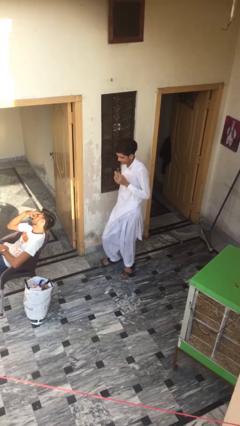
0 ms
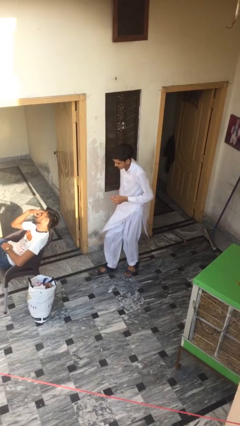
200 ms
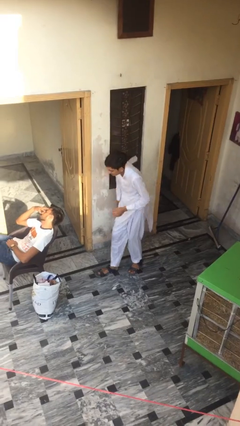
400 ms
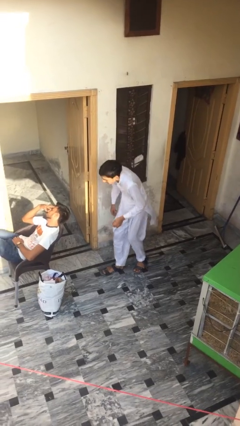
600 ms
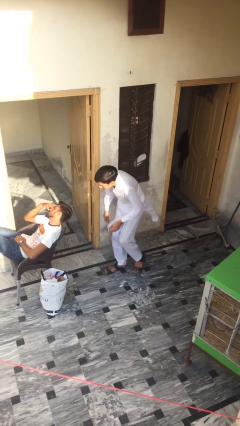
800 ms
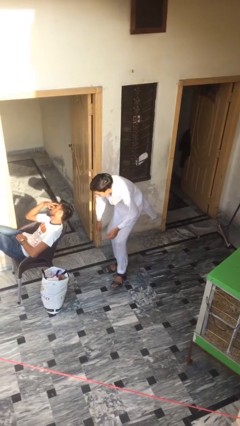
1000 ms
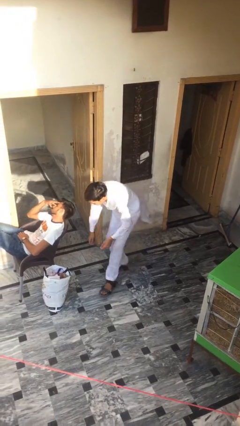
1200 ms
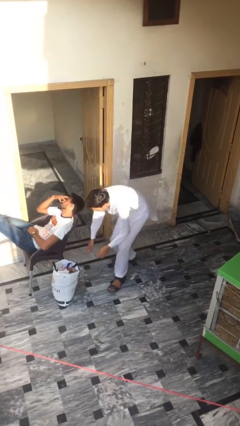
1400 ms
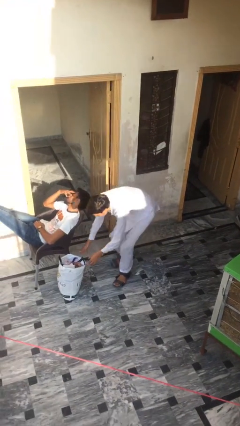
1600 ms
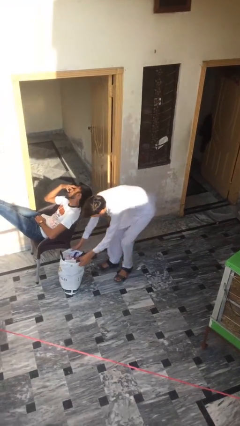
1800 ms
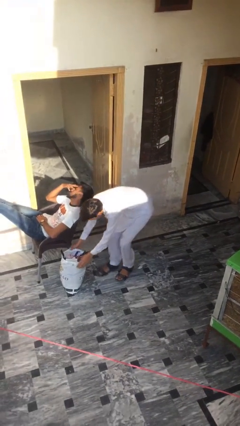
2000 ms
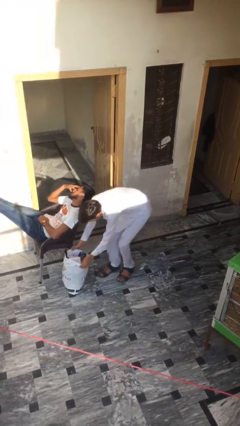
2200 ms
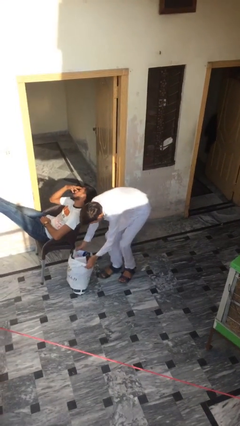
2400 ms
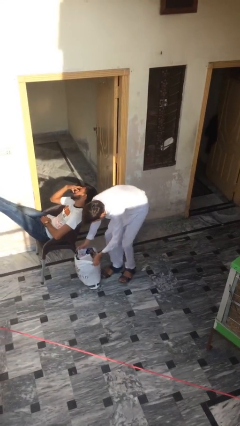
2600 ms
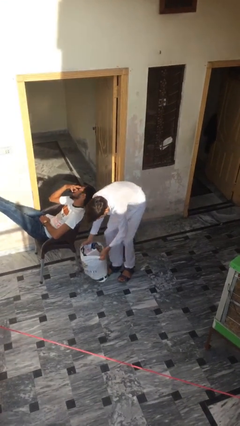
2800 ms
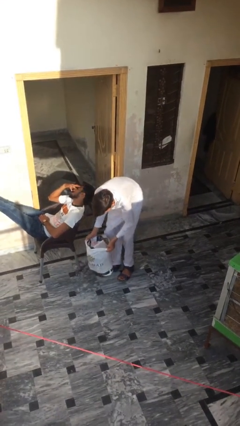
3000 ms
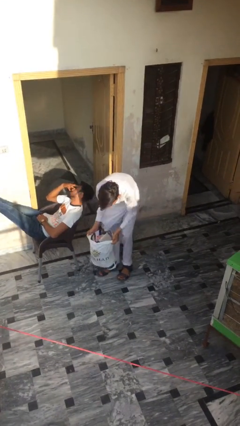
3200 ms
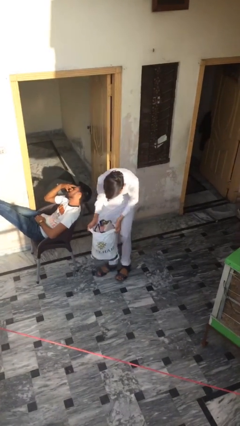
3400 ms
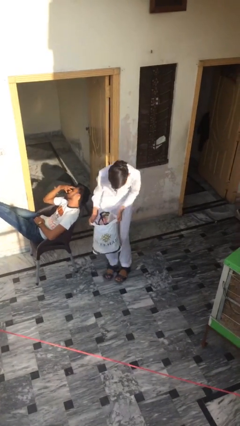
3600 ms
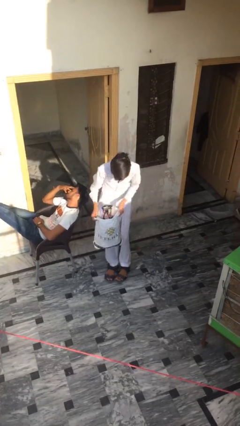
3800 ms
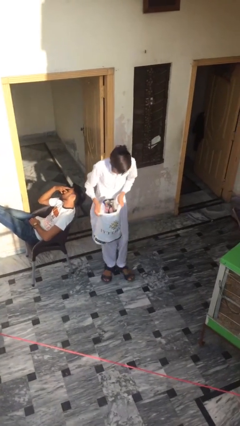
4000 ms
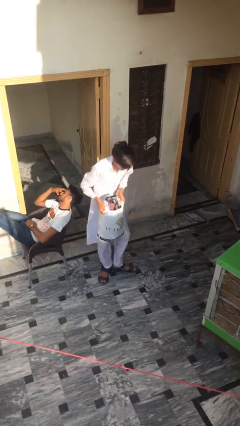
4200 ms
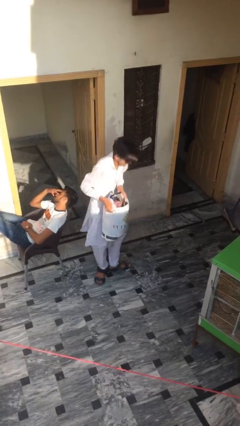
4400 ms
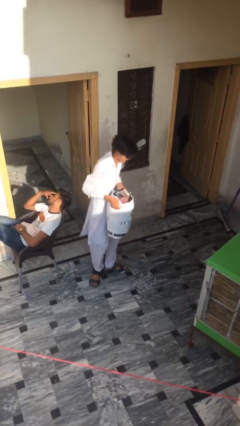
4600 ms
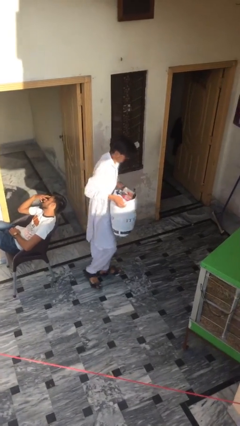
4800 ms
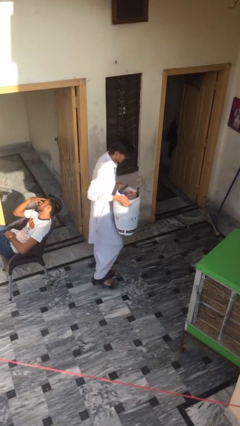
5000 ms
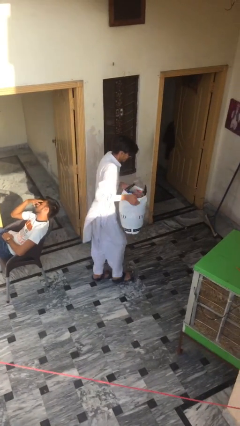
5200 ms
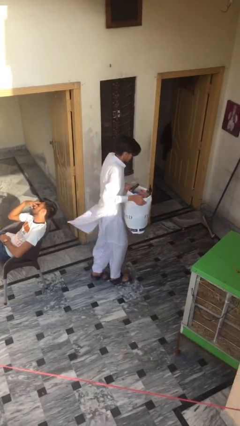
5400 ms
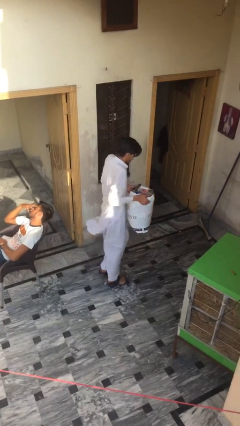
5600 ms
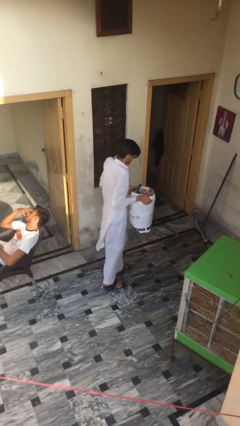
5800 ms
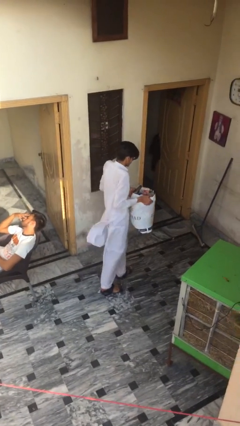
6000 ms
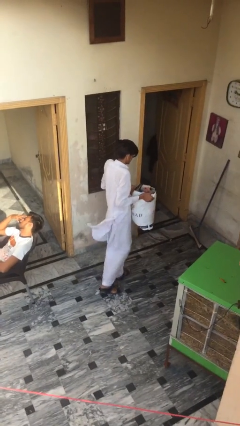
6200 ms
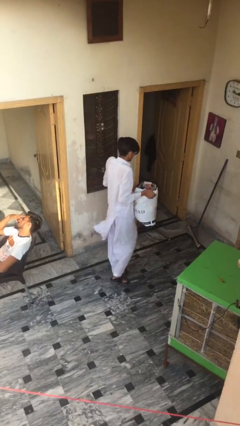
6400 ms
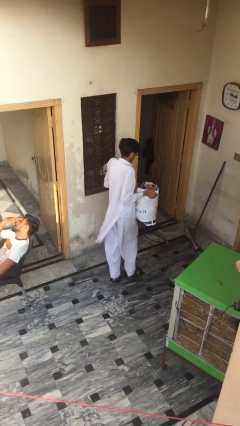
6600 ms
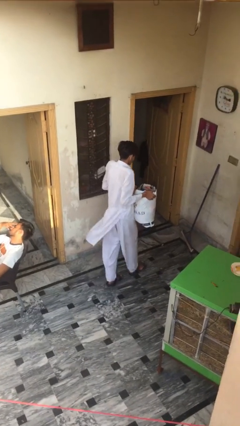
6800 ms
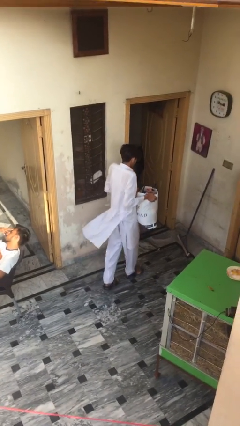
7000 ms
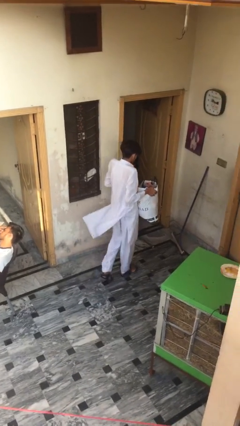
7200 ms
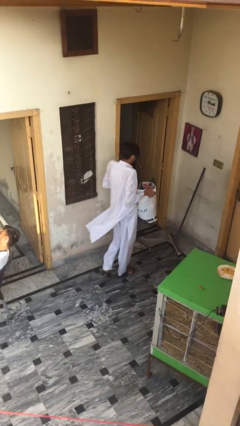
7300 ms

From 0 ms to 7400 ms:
person steals object from person

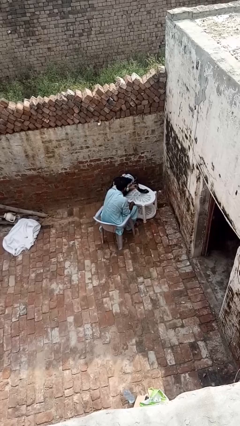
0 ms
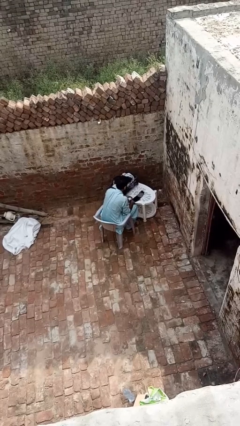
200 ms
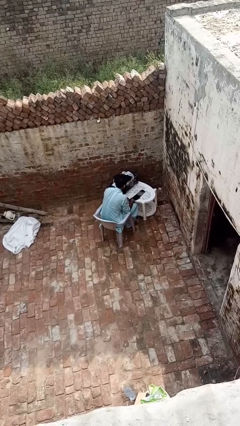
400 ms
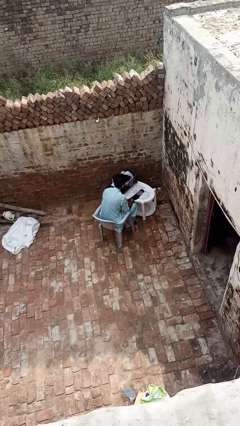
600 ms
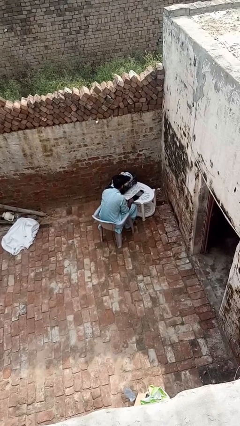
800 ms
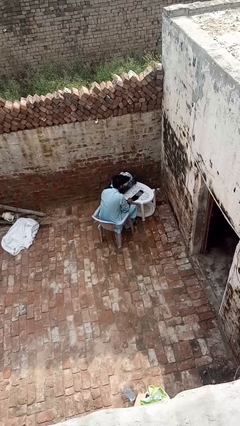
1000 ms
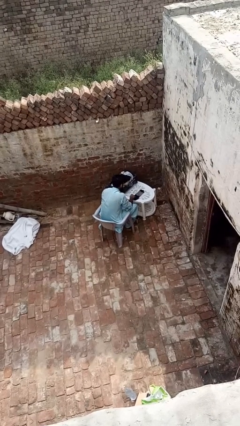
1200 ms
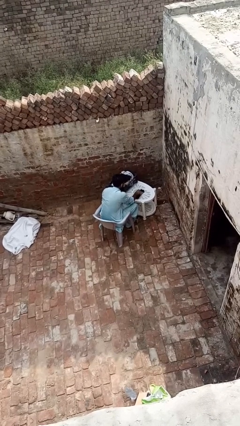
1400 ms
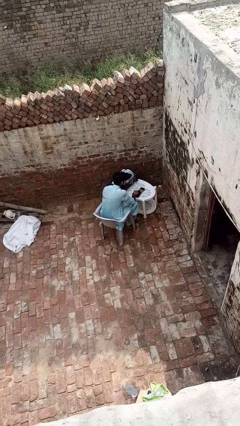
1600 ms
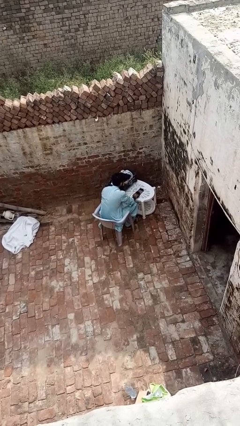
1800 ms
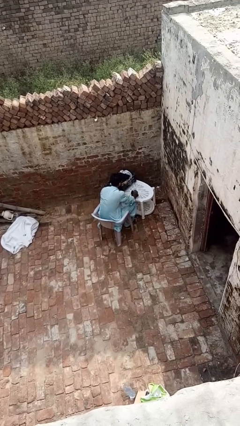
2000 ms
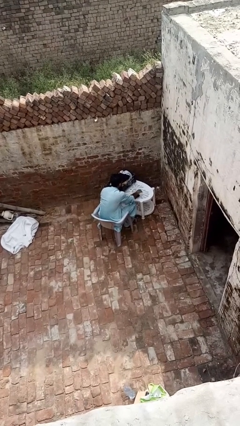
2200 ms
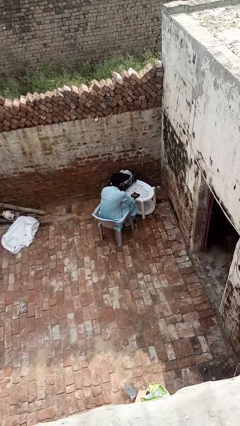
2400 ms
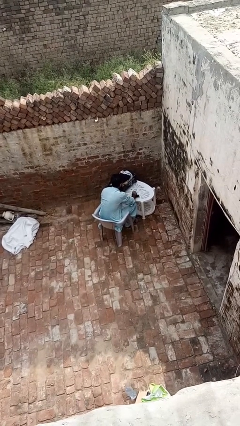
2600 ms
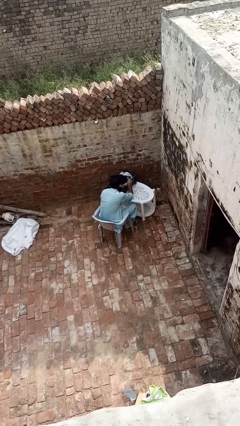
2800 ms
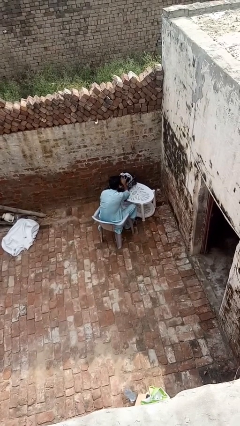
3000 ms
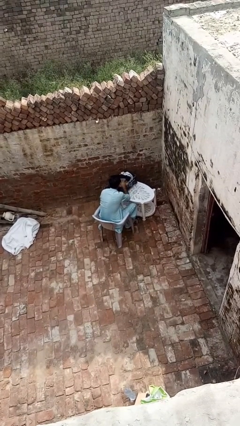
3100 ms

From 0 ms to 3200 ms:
person folds socks

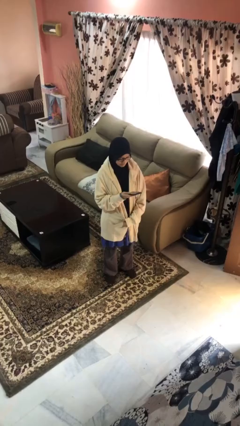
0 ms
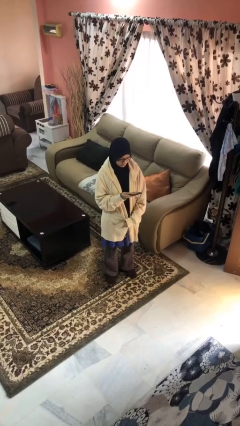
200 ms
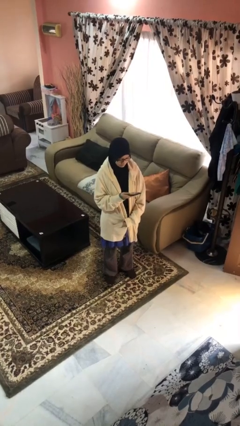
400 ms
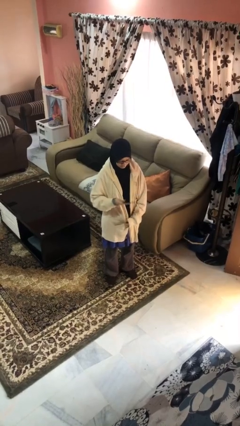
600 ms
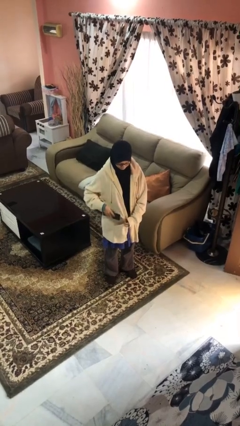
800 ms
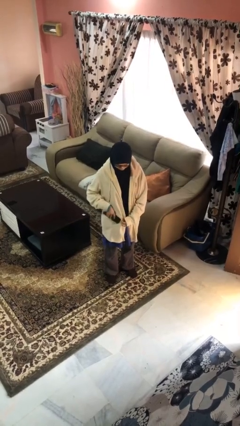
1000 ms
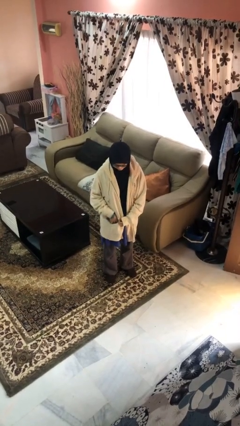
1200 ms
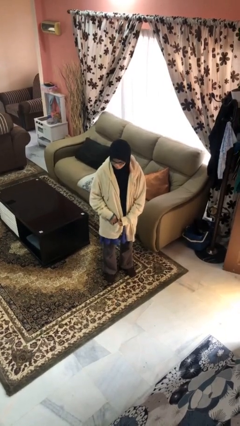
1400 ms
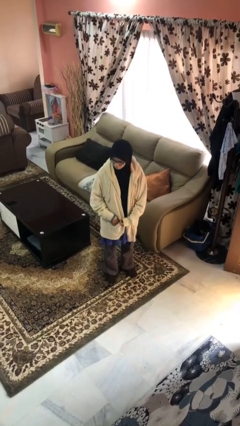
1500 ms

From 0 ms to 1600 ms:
person puts phone into pocket

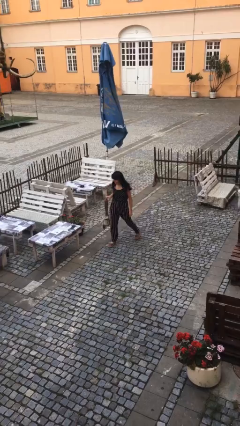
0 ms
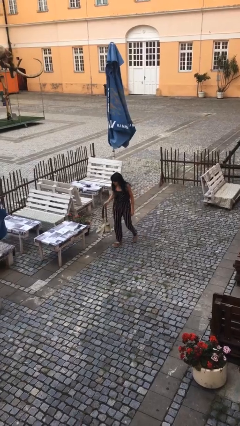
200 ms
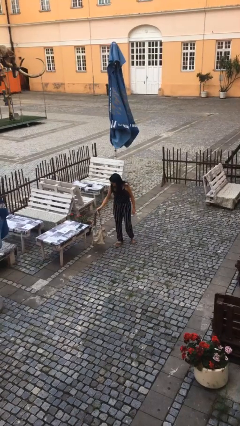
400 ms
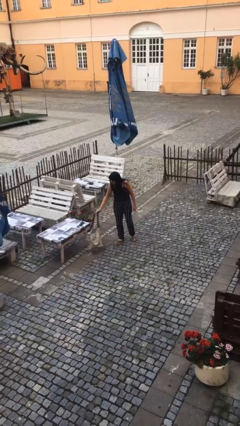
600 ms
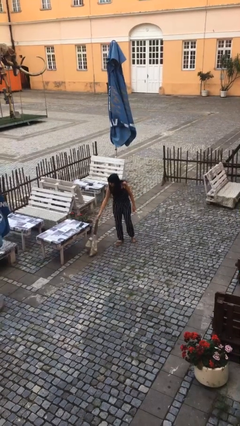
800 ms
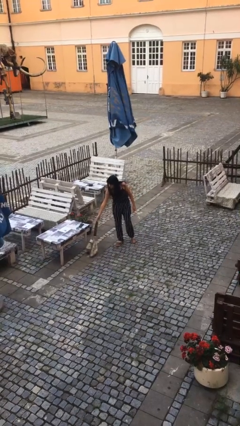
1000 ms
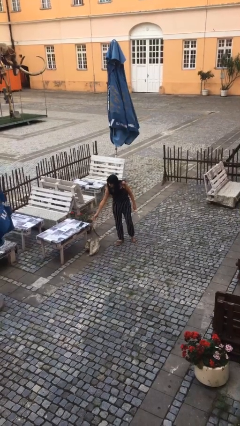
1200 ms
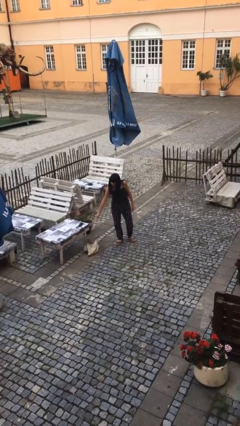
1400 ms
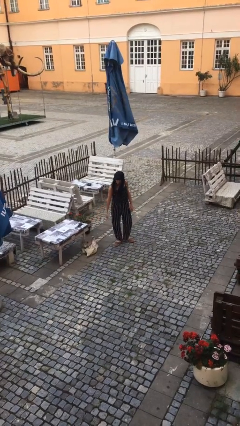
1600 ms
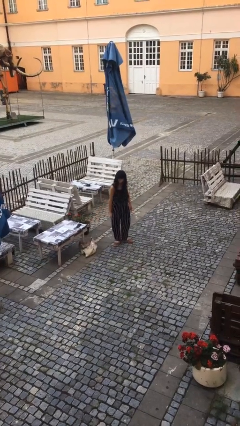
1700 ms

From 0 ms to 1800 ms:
person puts down object on floor

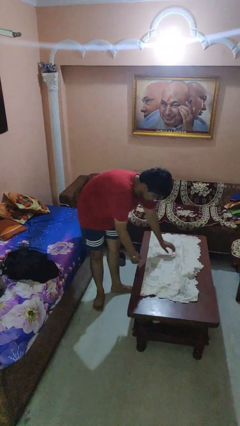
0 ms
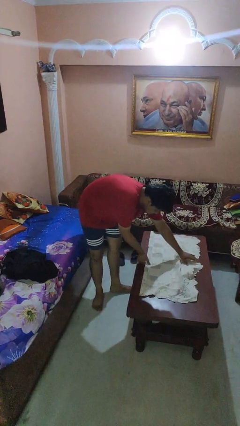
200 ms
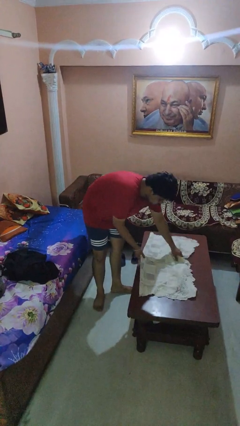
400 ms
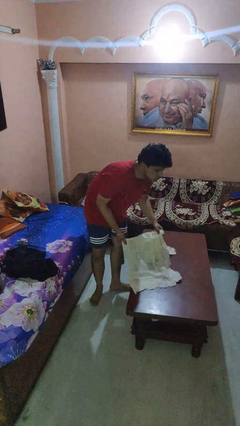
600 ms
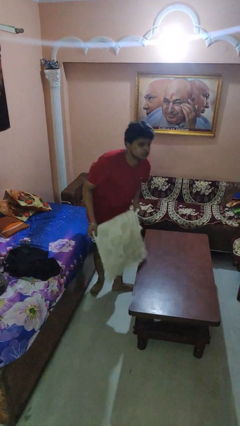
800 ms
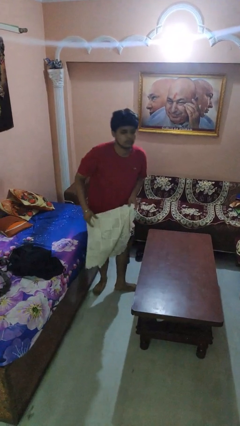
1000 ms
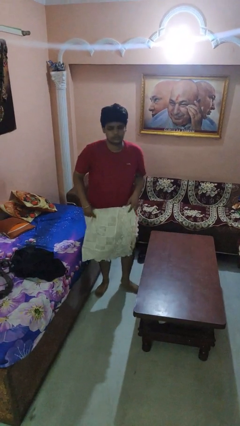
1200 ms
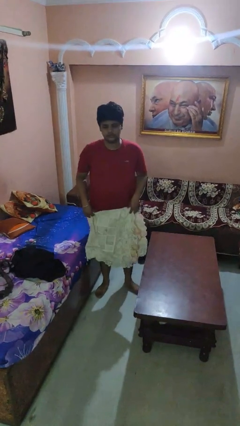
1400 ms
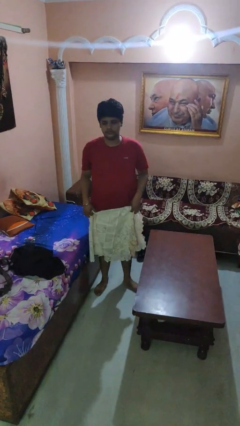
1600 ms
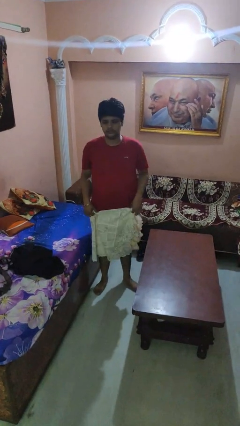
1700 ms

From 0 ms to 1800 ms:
person folds tablecloth

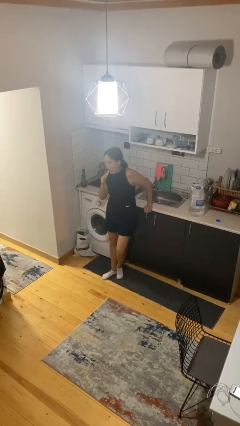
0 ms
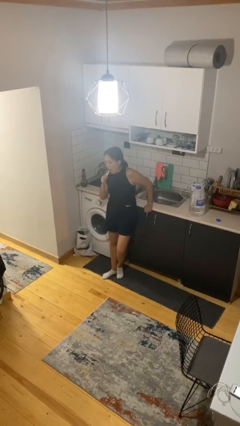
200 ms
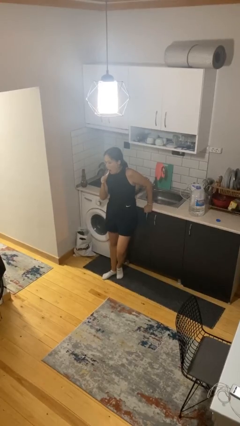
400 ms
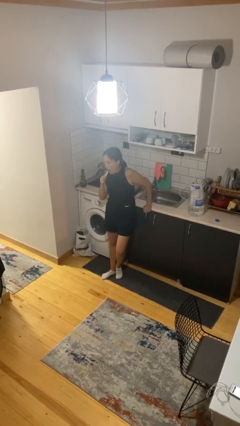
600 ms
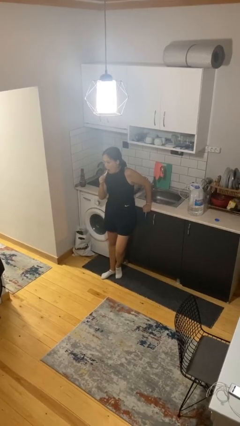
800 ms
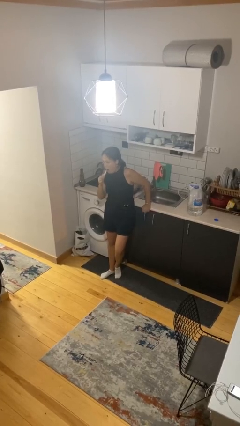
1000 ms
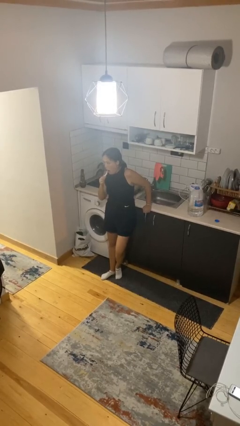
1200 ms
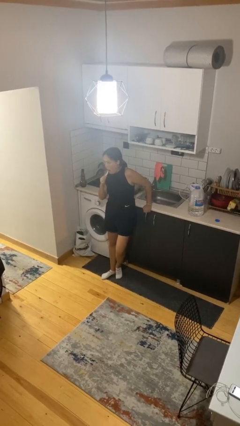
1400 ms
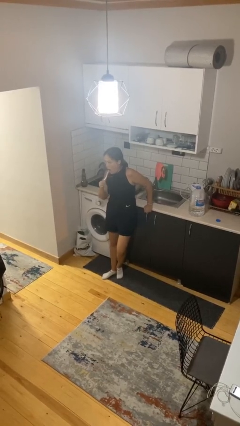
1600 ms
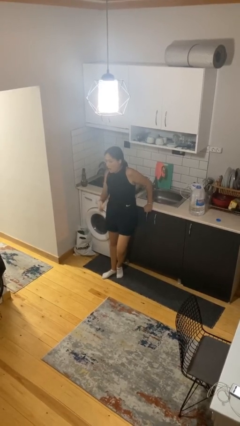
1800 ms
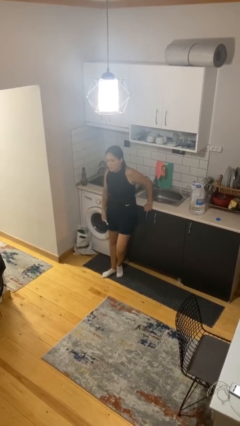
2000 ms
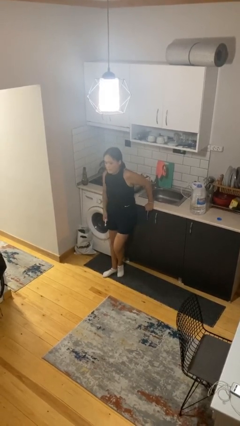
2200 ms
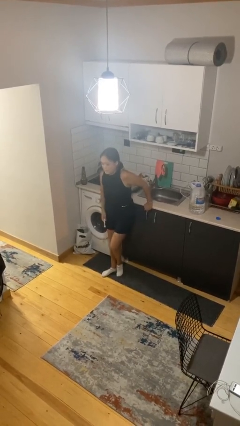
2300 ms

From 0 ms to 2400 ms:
person brushes teeth
